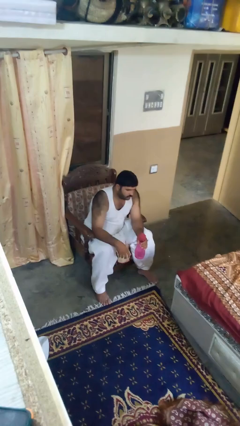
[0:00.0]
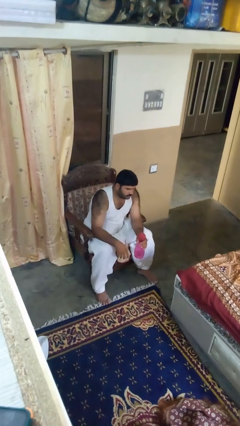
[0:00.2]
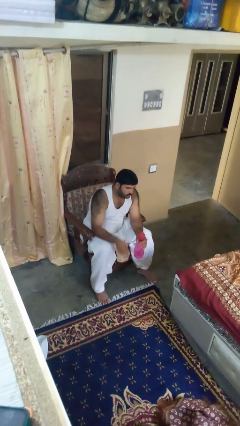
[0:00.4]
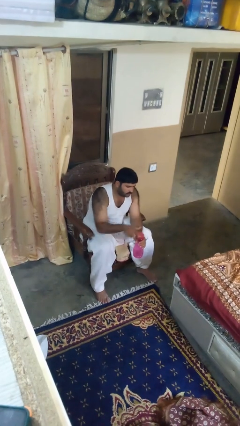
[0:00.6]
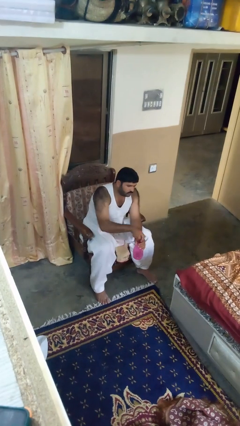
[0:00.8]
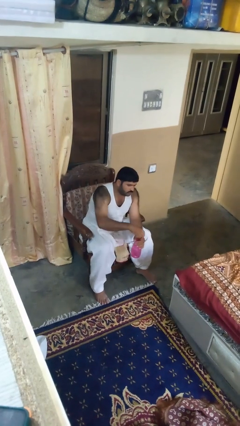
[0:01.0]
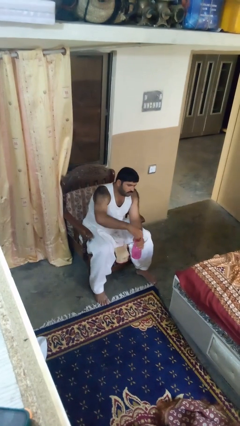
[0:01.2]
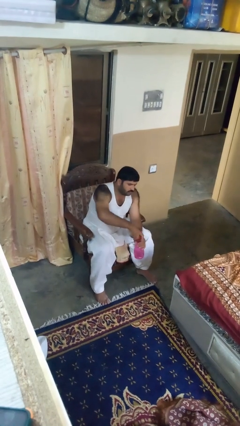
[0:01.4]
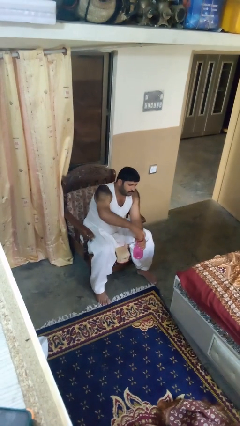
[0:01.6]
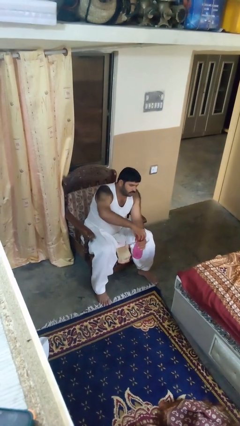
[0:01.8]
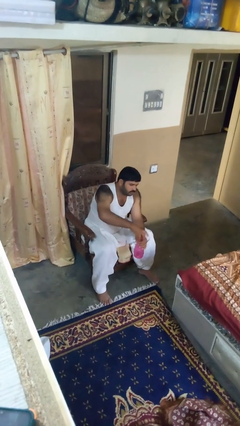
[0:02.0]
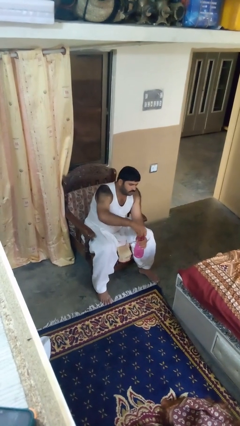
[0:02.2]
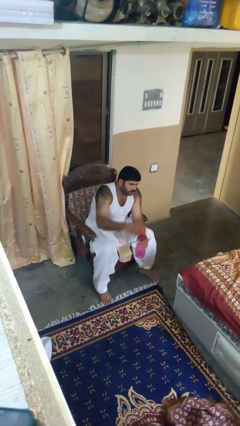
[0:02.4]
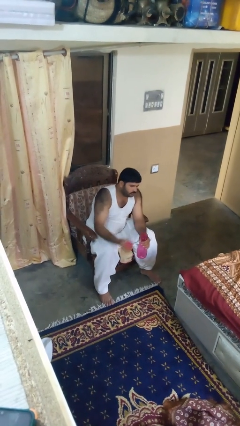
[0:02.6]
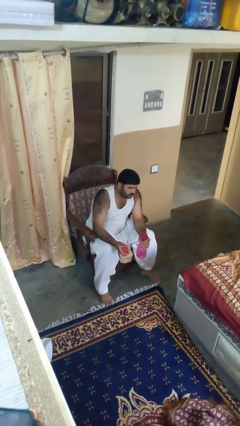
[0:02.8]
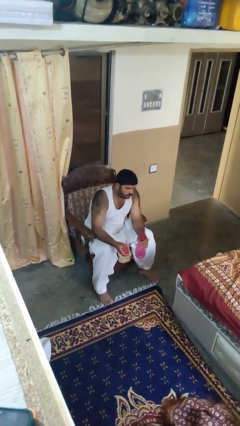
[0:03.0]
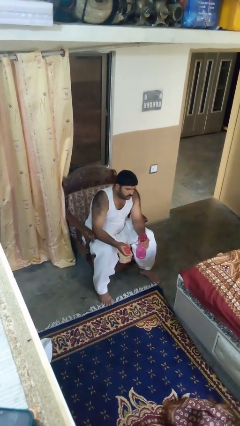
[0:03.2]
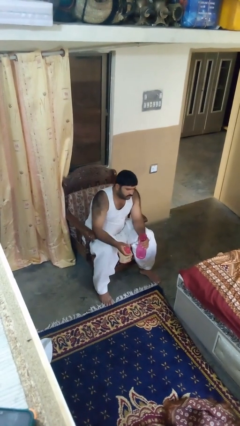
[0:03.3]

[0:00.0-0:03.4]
person unscrews lid from bottle

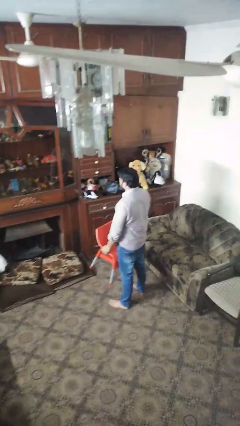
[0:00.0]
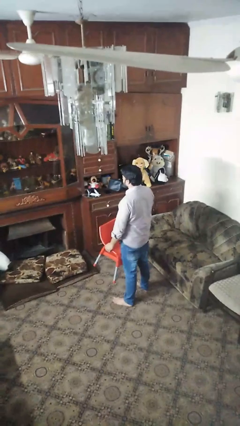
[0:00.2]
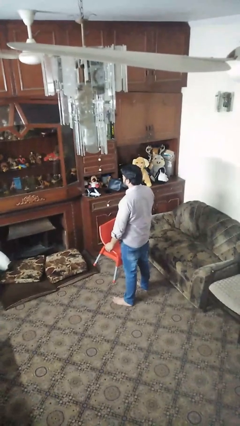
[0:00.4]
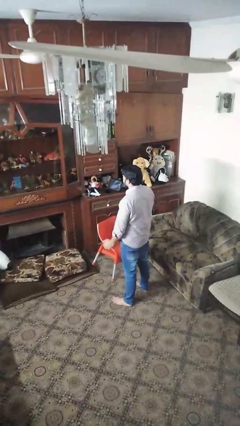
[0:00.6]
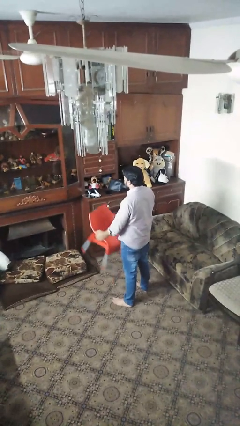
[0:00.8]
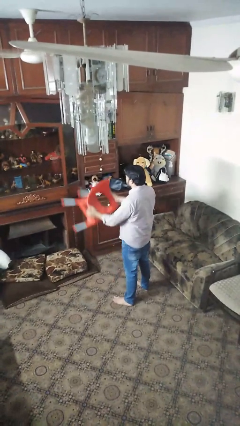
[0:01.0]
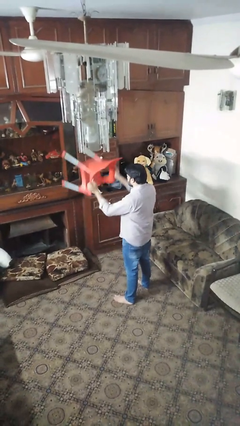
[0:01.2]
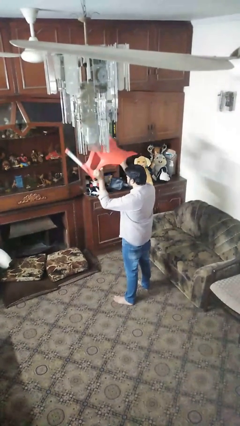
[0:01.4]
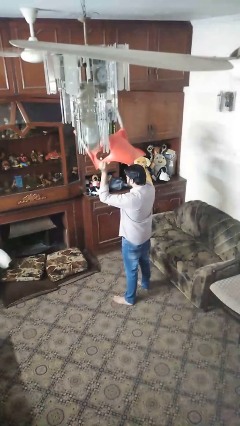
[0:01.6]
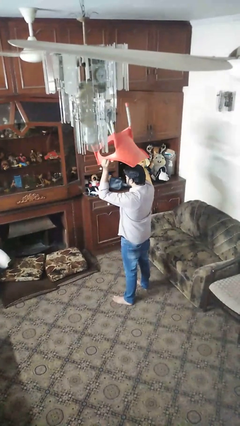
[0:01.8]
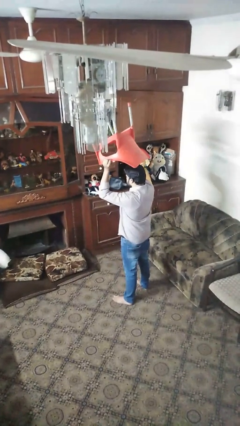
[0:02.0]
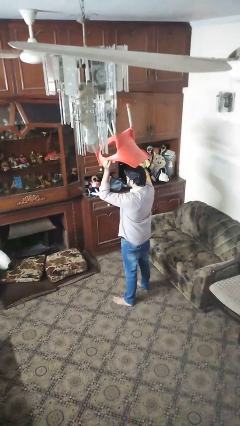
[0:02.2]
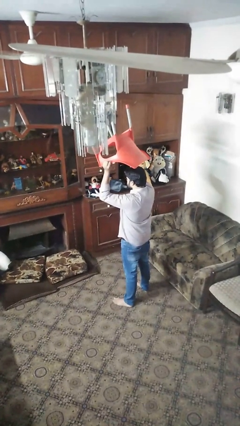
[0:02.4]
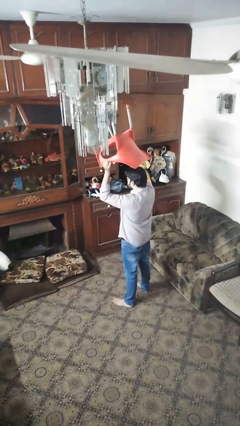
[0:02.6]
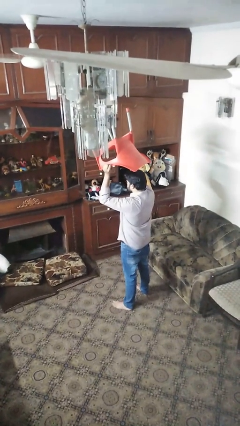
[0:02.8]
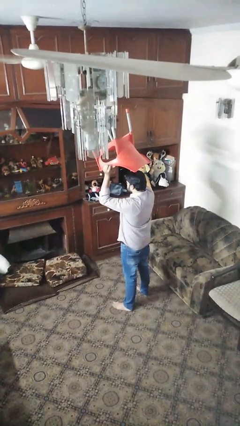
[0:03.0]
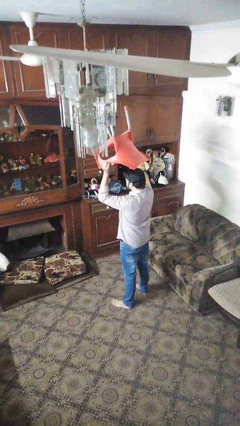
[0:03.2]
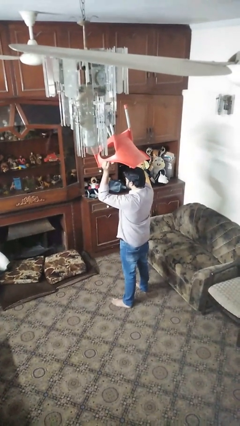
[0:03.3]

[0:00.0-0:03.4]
person holds object above head

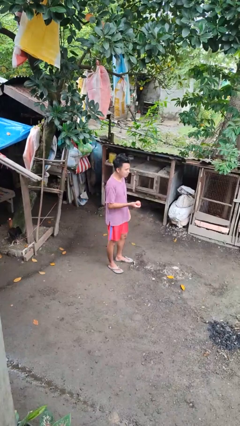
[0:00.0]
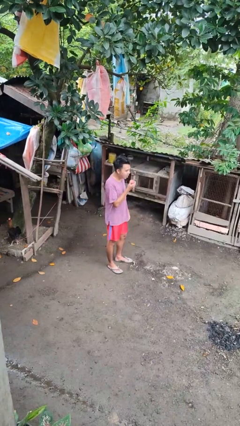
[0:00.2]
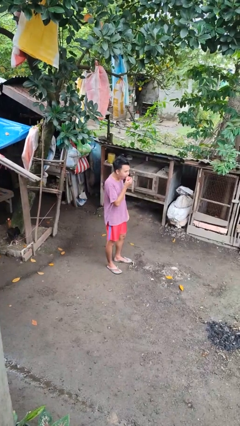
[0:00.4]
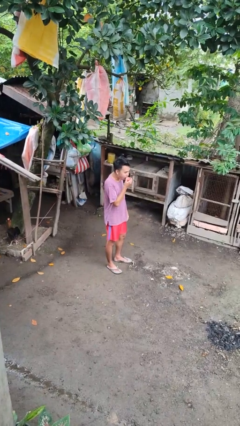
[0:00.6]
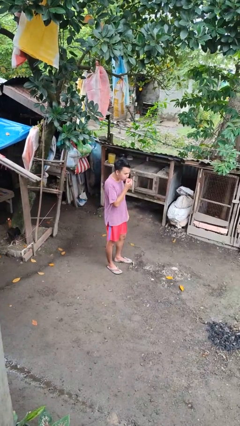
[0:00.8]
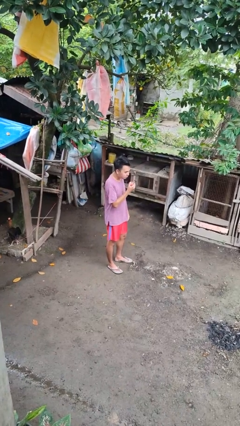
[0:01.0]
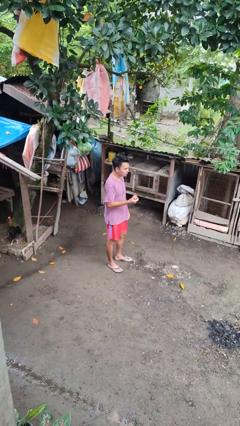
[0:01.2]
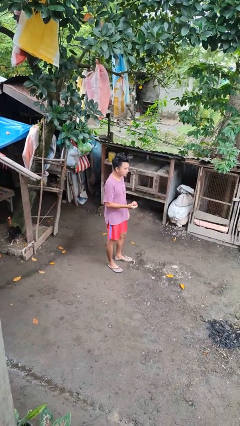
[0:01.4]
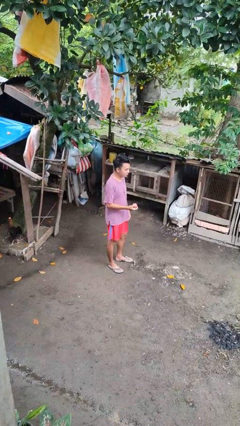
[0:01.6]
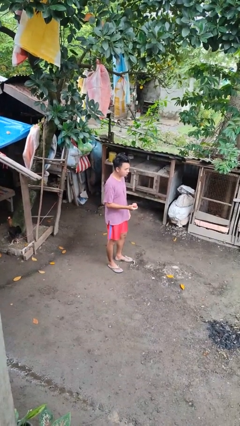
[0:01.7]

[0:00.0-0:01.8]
person eats apple

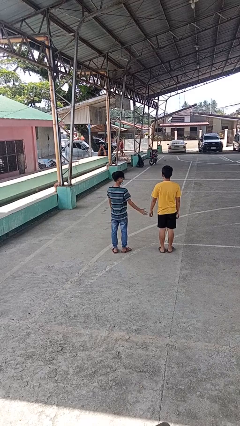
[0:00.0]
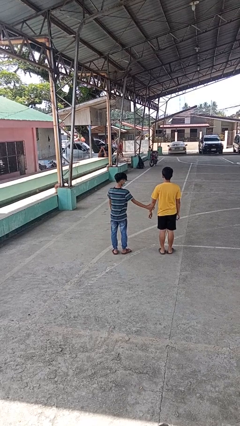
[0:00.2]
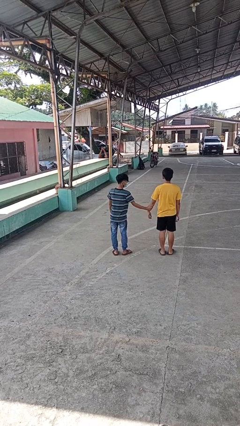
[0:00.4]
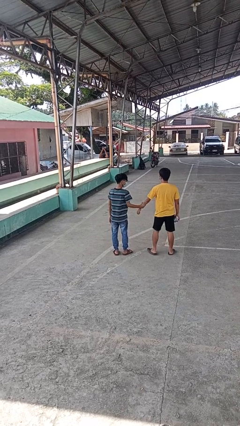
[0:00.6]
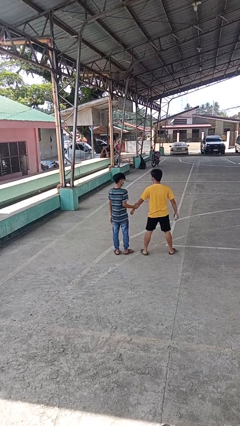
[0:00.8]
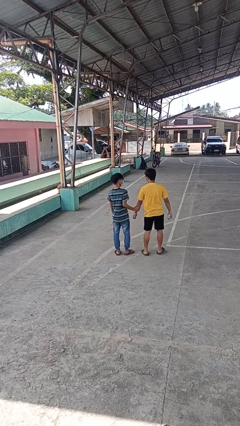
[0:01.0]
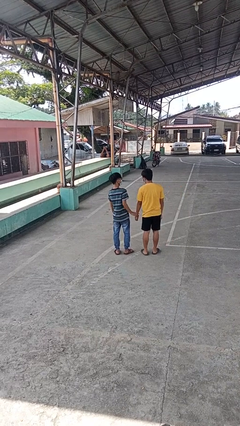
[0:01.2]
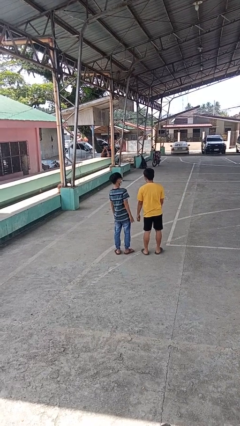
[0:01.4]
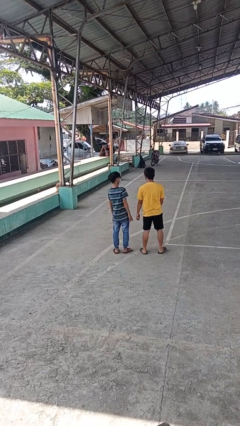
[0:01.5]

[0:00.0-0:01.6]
person grabs person by forearm

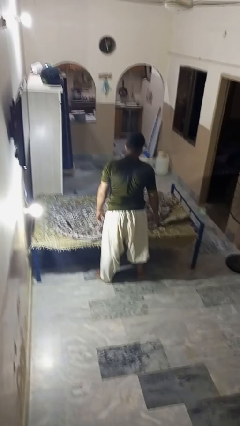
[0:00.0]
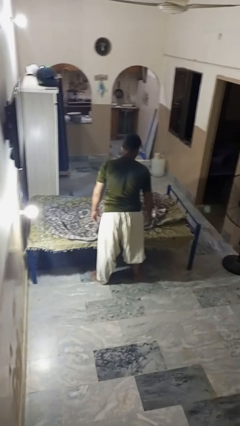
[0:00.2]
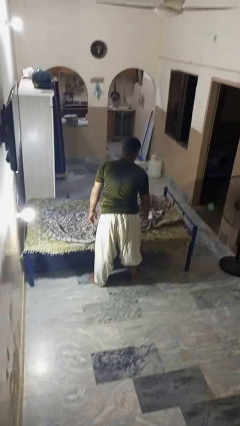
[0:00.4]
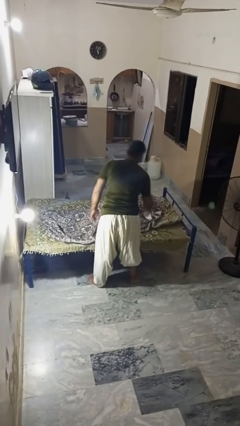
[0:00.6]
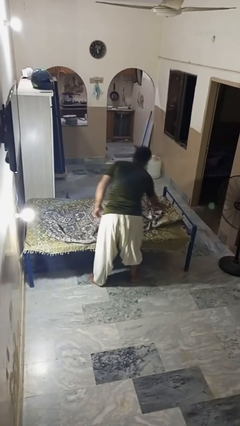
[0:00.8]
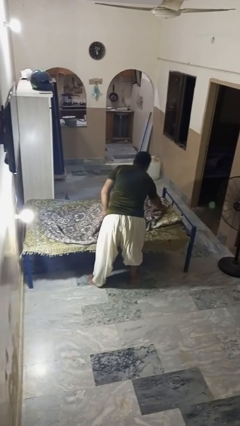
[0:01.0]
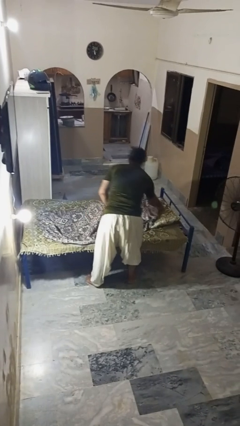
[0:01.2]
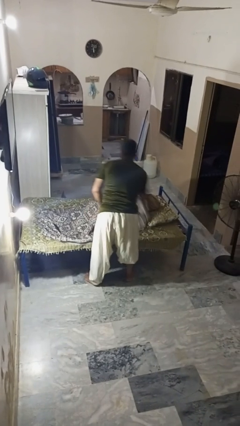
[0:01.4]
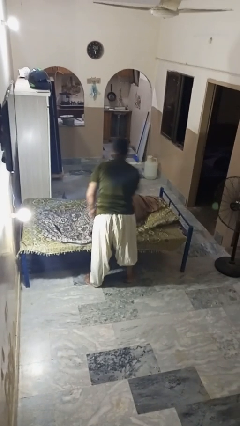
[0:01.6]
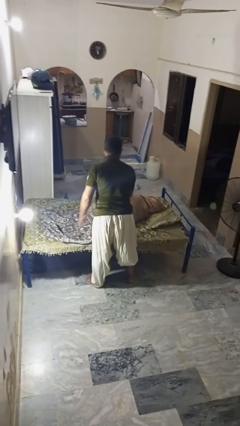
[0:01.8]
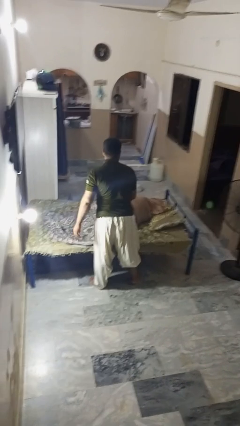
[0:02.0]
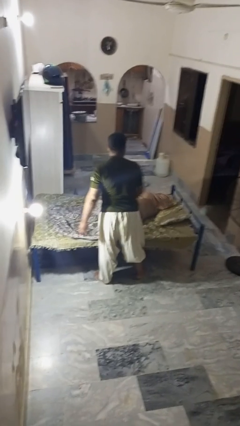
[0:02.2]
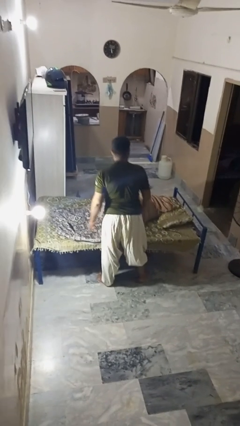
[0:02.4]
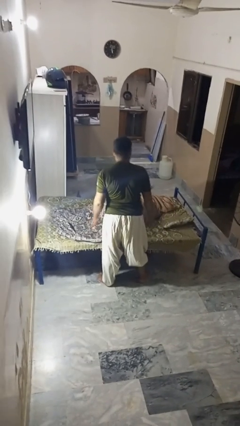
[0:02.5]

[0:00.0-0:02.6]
person uncovers friend with blanket

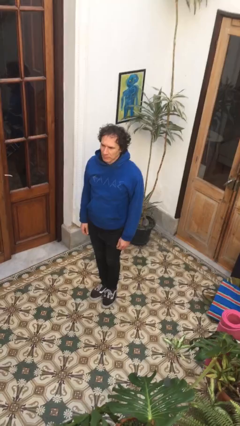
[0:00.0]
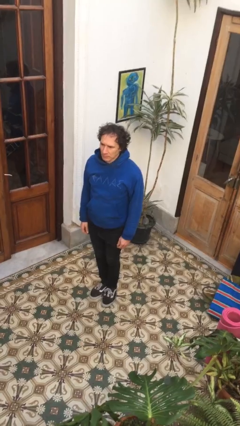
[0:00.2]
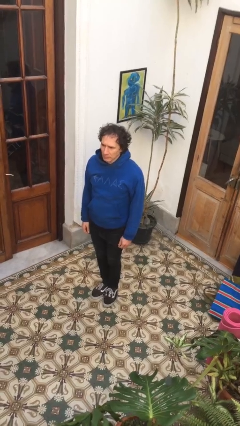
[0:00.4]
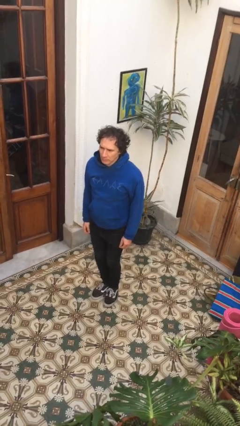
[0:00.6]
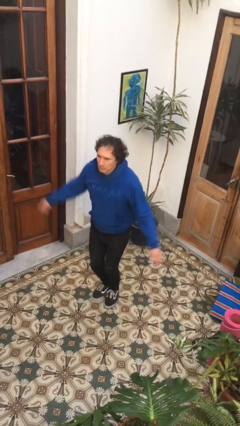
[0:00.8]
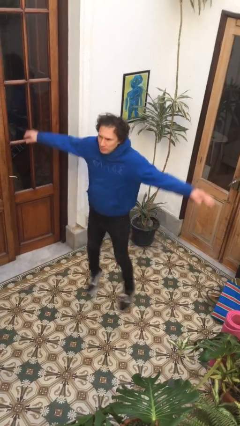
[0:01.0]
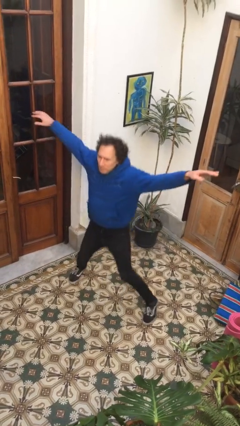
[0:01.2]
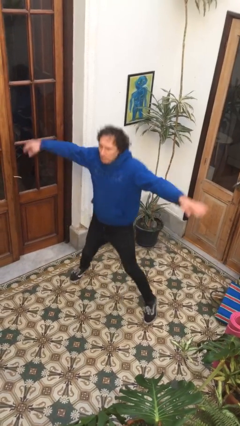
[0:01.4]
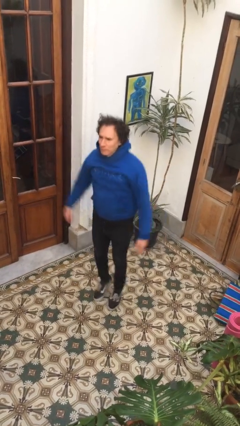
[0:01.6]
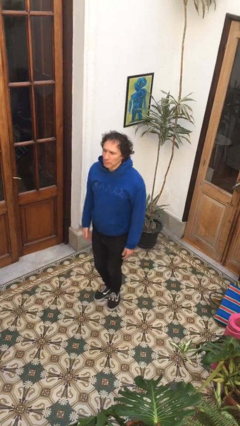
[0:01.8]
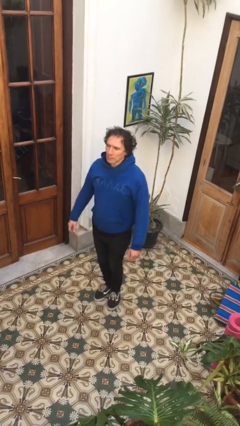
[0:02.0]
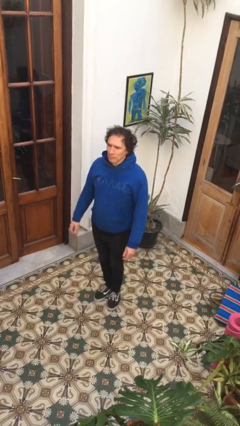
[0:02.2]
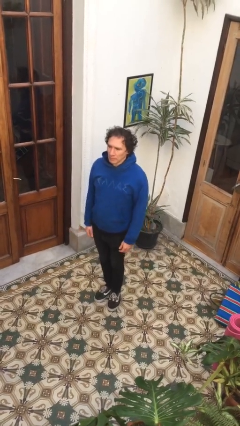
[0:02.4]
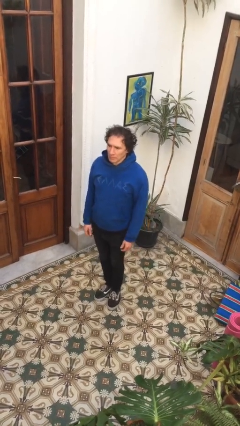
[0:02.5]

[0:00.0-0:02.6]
person exercises with jumping jacks

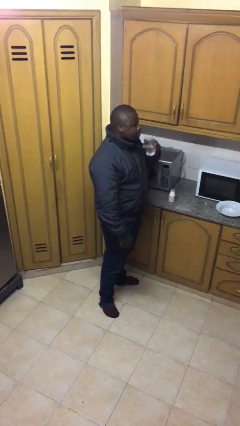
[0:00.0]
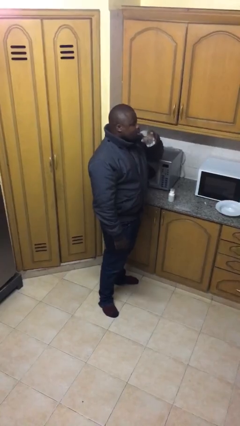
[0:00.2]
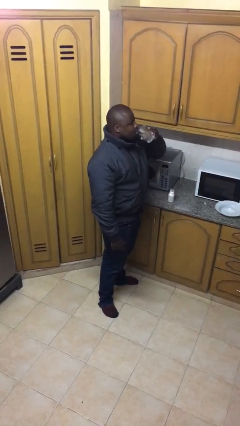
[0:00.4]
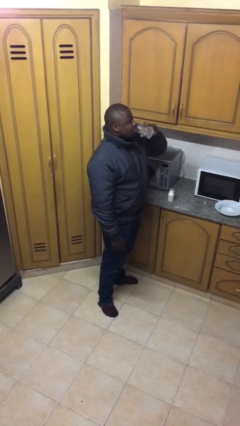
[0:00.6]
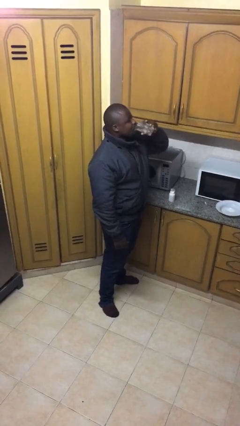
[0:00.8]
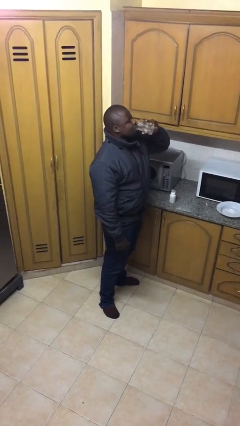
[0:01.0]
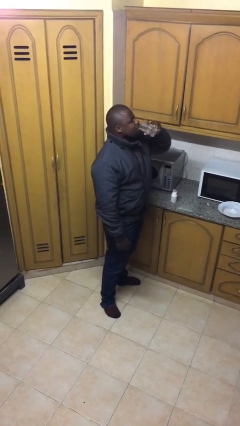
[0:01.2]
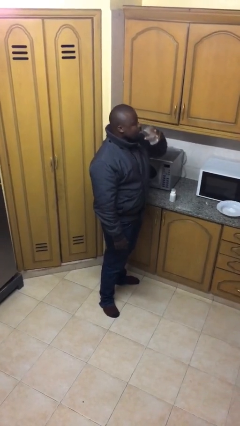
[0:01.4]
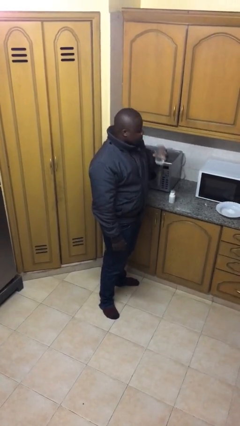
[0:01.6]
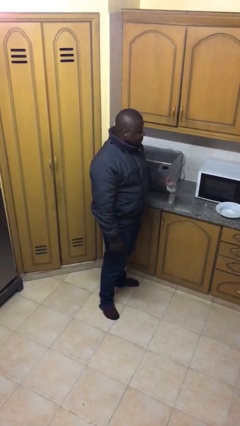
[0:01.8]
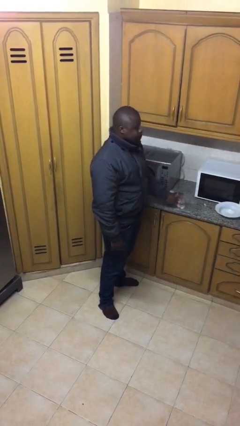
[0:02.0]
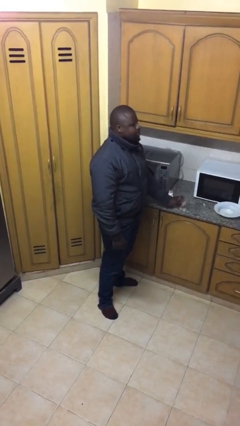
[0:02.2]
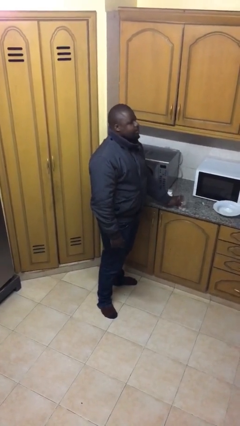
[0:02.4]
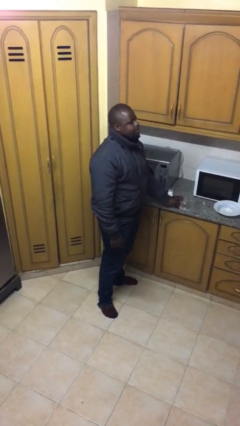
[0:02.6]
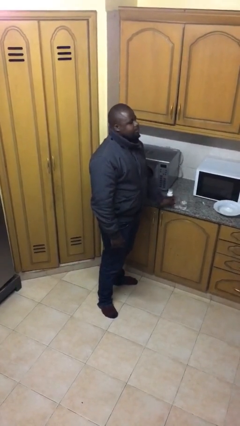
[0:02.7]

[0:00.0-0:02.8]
person drinks from cup
